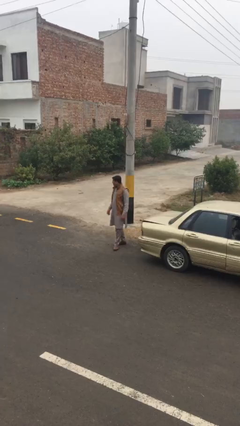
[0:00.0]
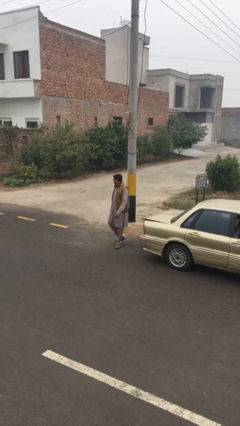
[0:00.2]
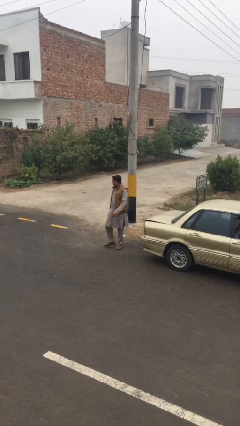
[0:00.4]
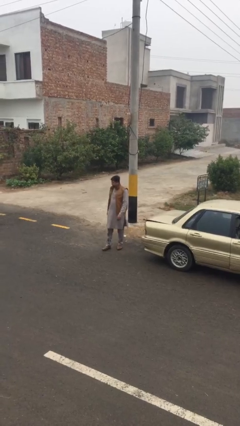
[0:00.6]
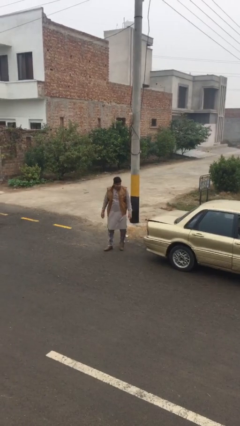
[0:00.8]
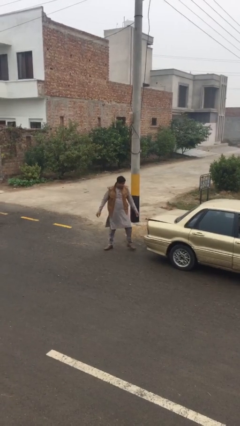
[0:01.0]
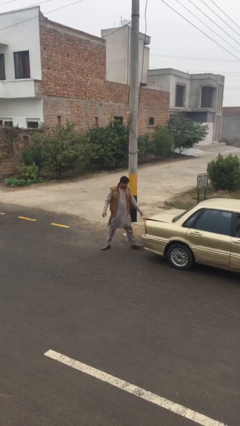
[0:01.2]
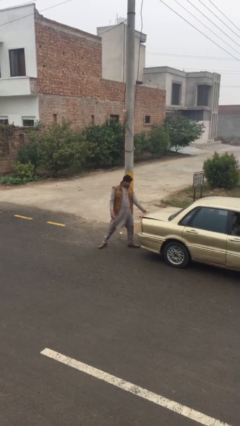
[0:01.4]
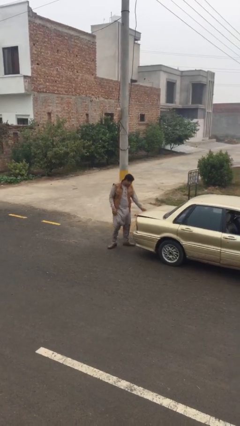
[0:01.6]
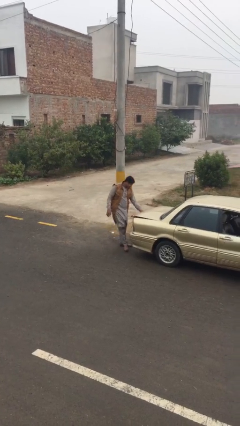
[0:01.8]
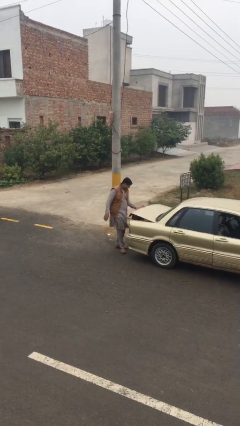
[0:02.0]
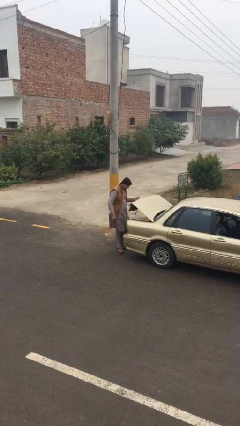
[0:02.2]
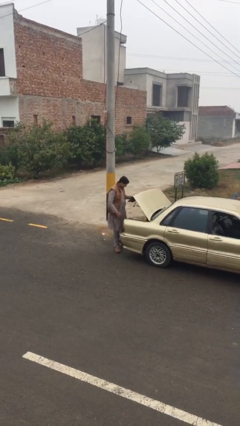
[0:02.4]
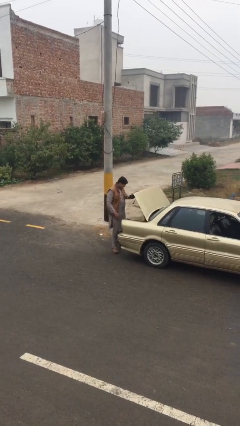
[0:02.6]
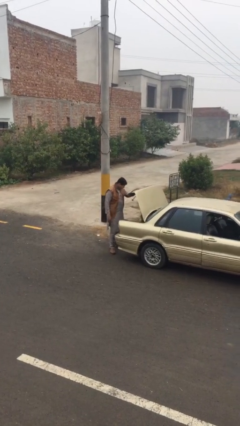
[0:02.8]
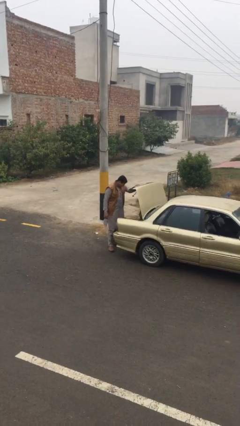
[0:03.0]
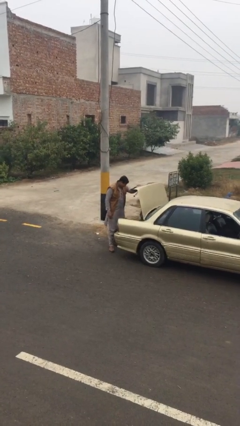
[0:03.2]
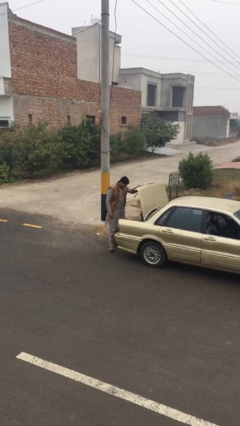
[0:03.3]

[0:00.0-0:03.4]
person opens car trunk

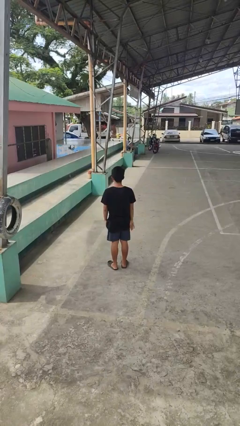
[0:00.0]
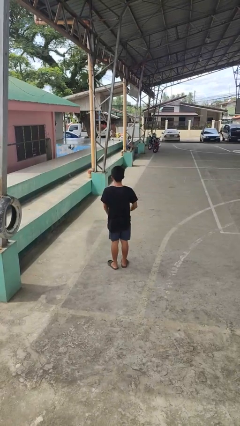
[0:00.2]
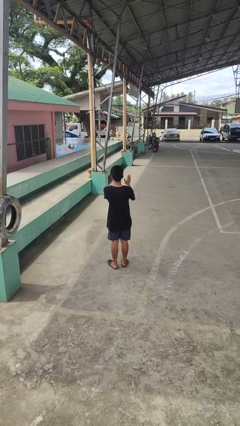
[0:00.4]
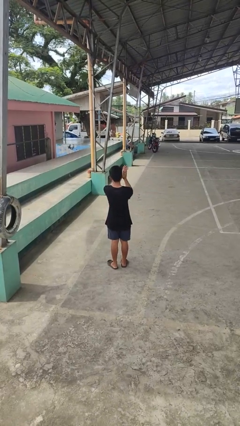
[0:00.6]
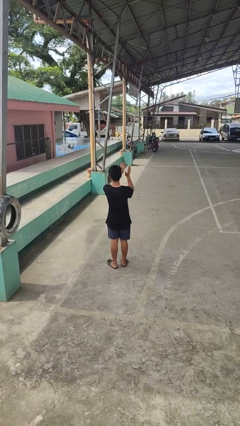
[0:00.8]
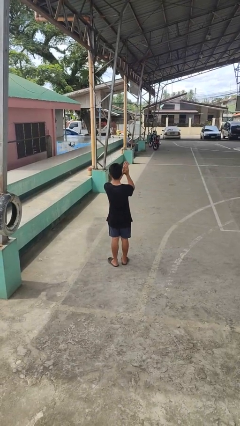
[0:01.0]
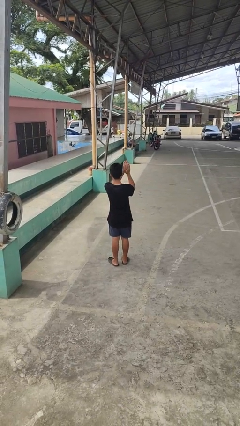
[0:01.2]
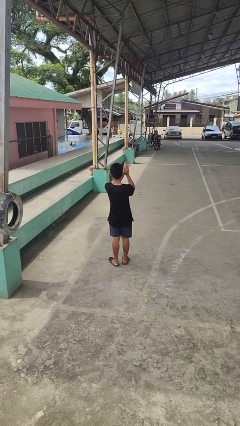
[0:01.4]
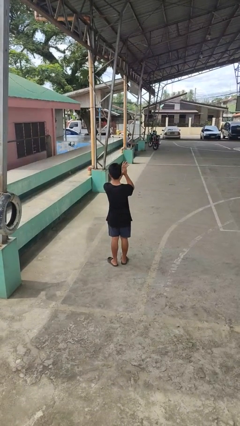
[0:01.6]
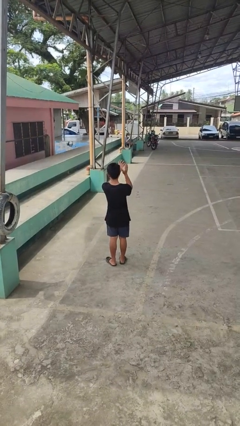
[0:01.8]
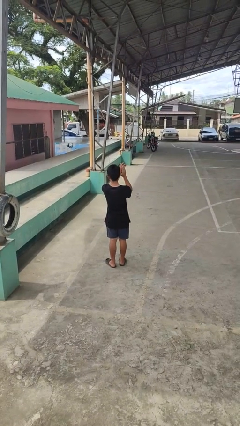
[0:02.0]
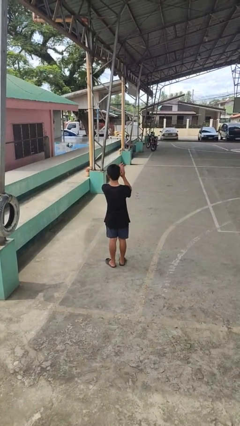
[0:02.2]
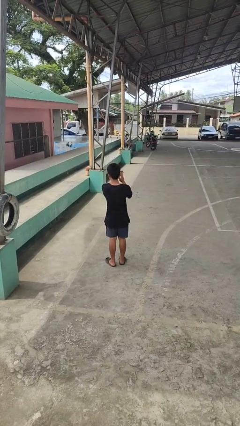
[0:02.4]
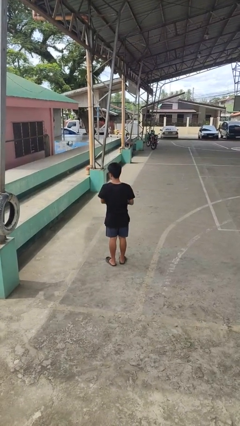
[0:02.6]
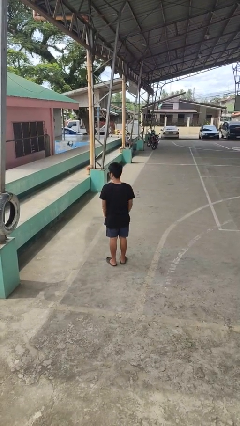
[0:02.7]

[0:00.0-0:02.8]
person claps hands

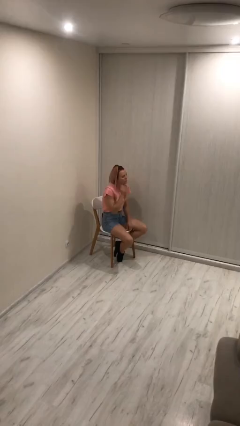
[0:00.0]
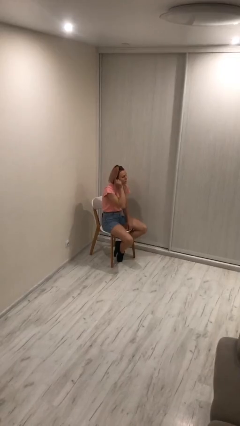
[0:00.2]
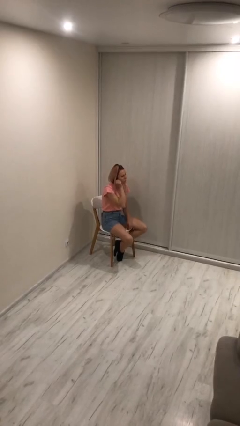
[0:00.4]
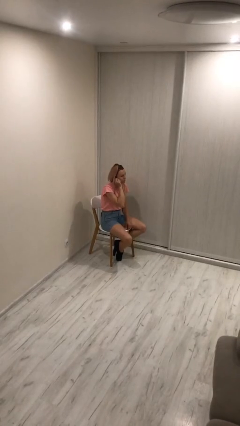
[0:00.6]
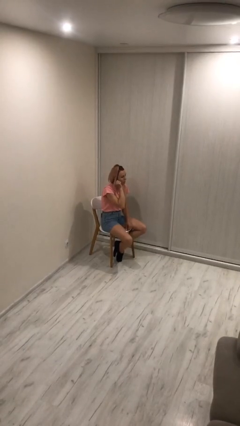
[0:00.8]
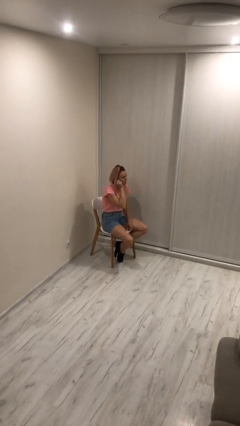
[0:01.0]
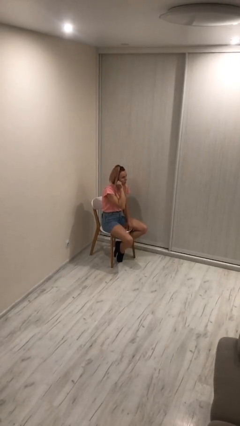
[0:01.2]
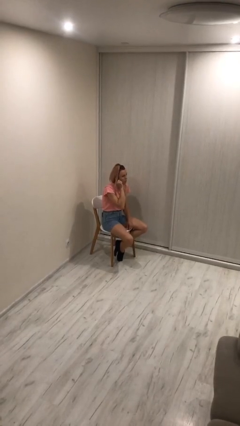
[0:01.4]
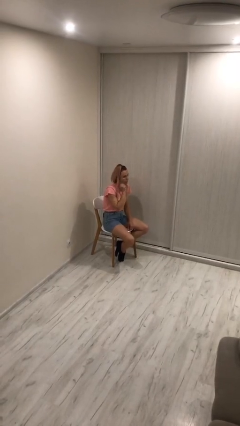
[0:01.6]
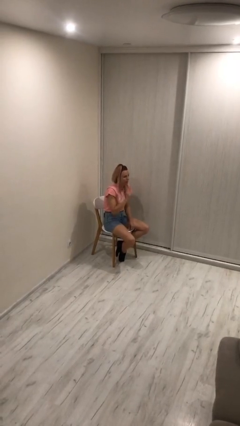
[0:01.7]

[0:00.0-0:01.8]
person touches earlobe

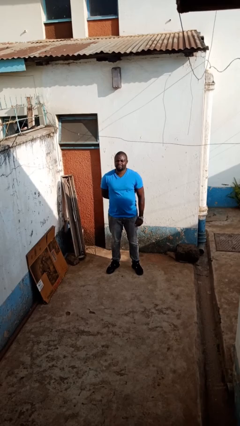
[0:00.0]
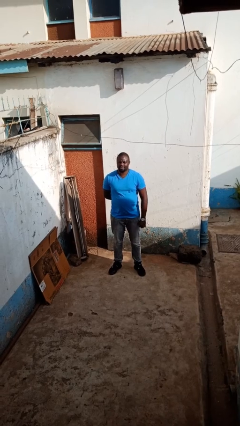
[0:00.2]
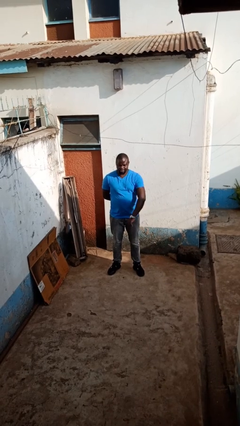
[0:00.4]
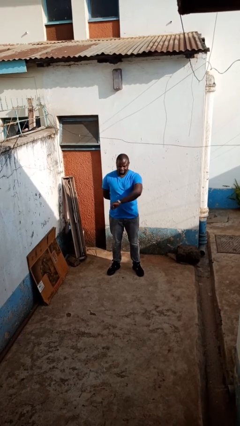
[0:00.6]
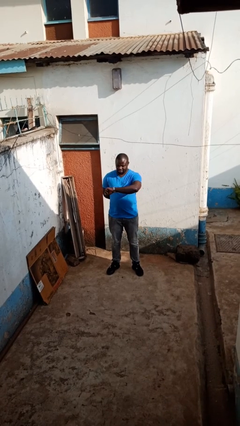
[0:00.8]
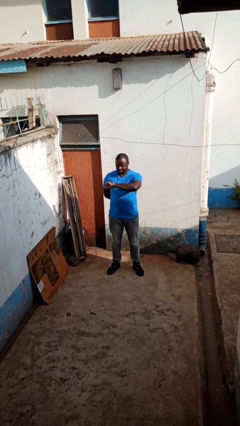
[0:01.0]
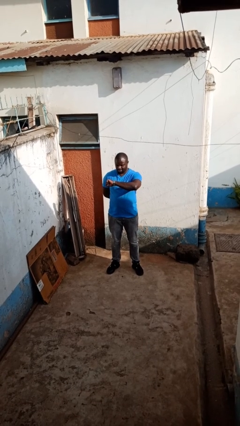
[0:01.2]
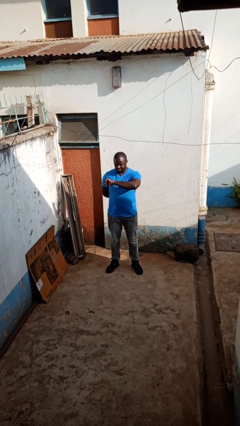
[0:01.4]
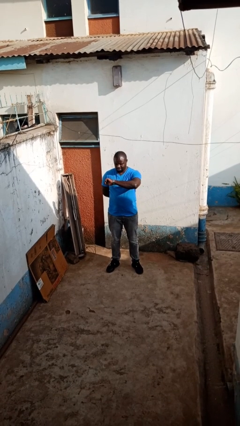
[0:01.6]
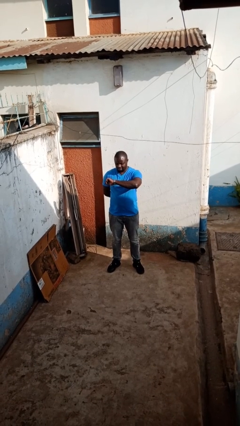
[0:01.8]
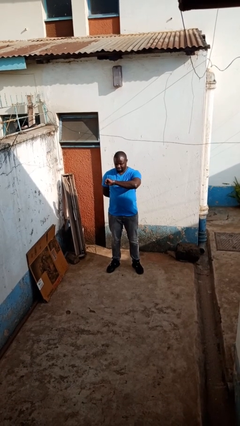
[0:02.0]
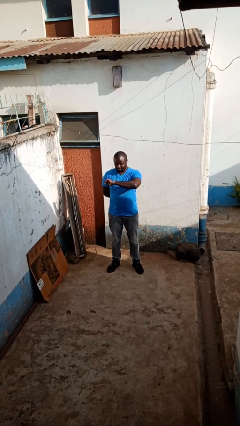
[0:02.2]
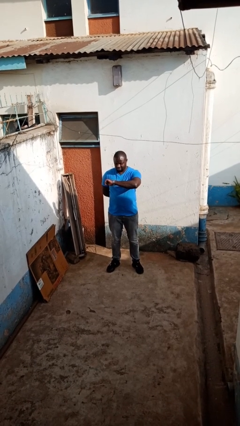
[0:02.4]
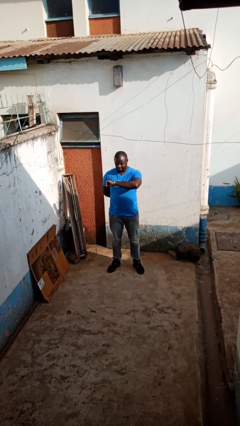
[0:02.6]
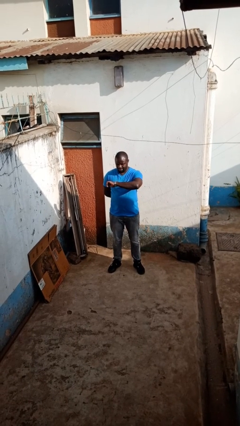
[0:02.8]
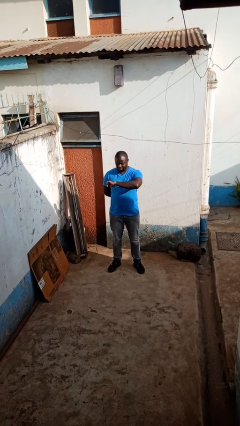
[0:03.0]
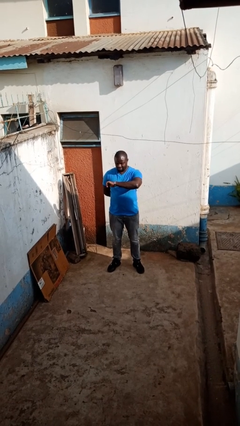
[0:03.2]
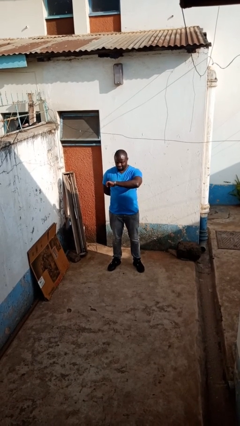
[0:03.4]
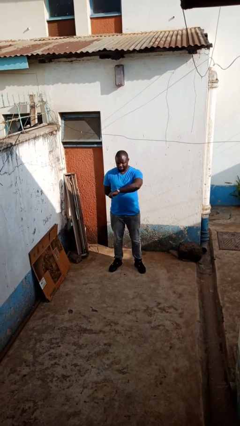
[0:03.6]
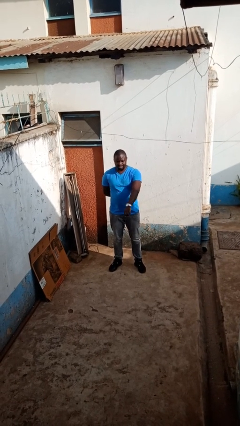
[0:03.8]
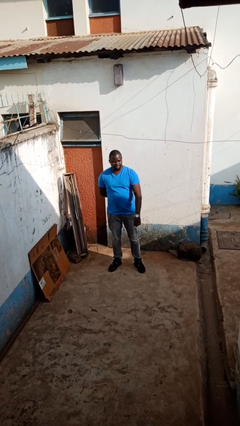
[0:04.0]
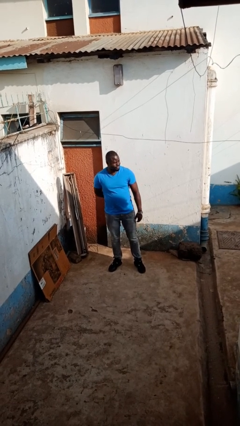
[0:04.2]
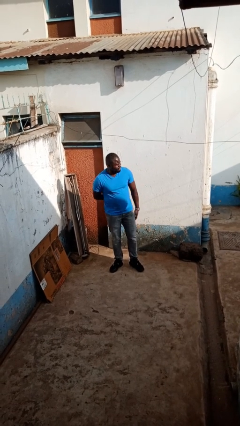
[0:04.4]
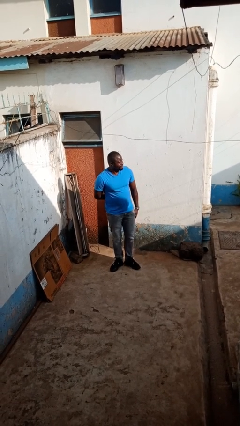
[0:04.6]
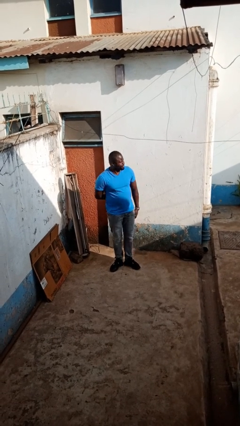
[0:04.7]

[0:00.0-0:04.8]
person looks at wristwatch

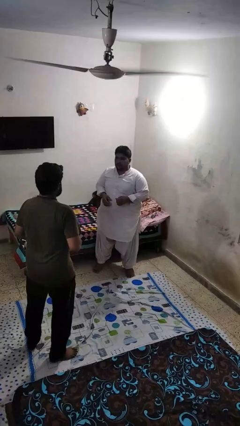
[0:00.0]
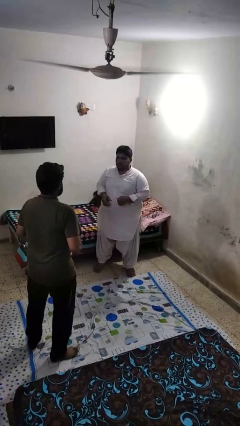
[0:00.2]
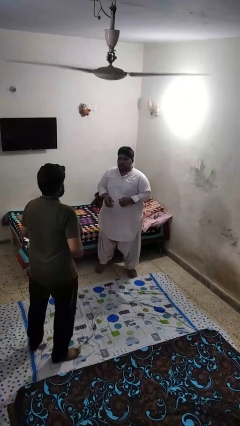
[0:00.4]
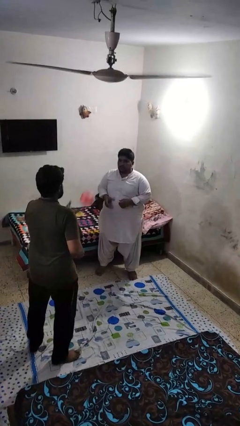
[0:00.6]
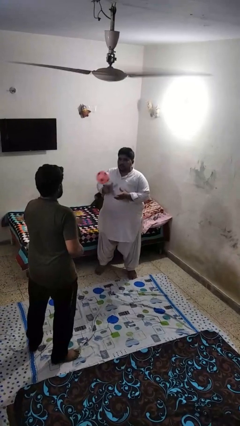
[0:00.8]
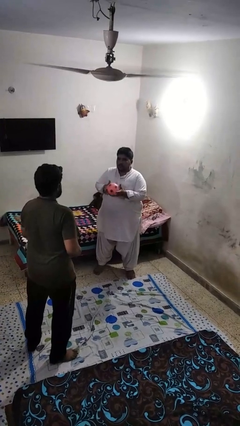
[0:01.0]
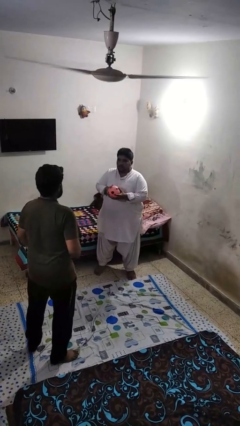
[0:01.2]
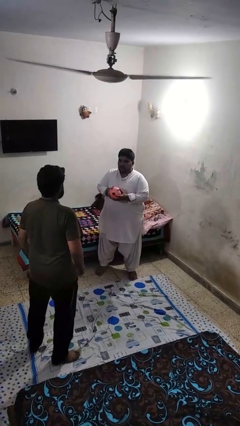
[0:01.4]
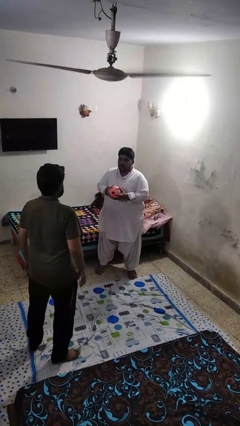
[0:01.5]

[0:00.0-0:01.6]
person catches object from person

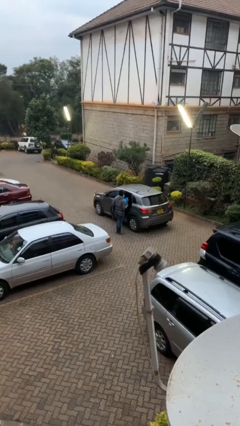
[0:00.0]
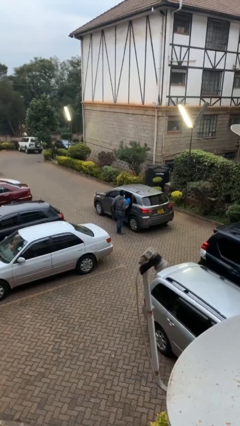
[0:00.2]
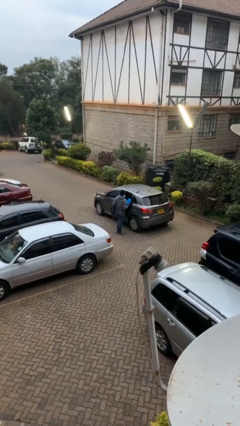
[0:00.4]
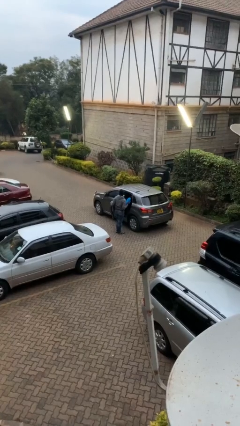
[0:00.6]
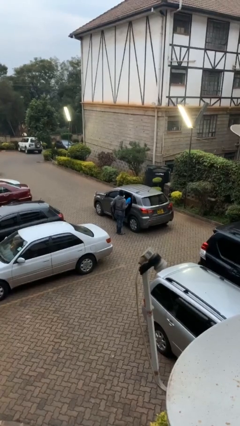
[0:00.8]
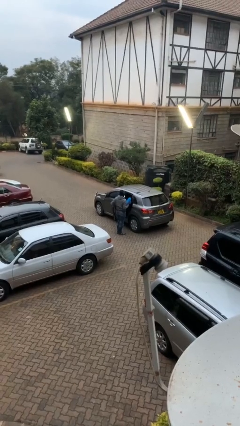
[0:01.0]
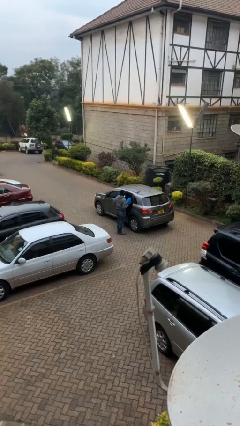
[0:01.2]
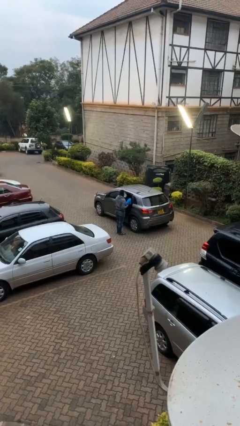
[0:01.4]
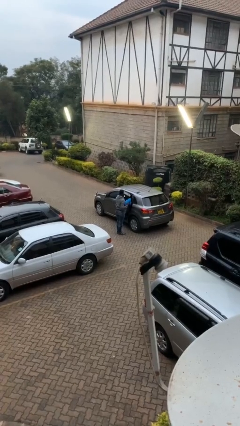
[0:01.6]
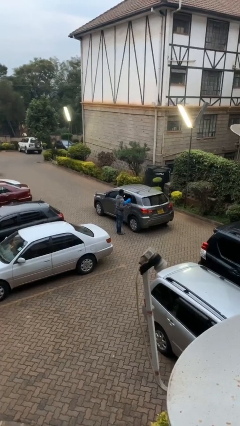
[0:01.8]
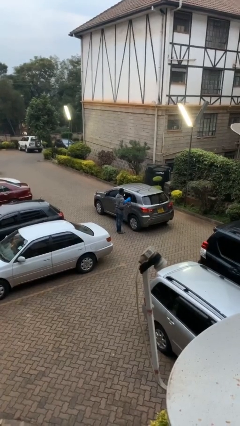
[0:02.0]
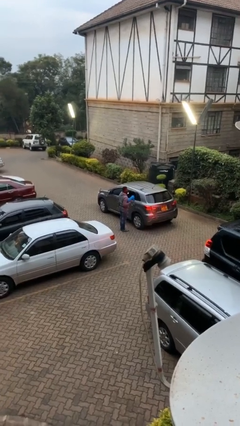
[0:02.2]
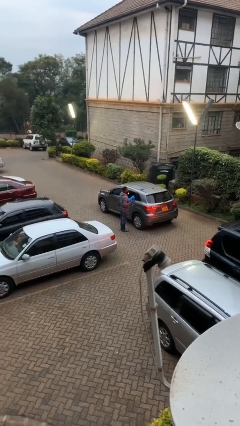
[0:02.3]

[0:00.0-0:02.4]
person closes car door

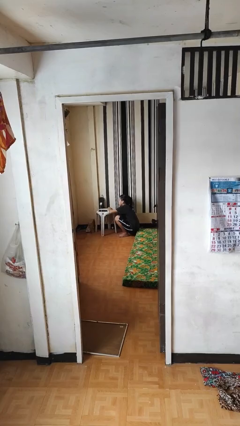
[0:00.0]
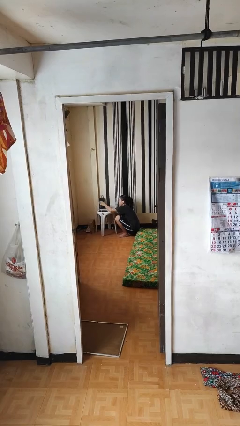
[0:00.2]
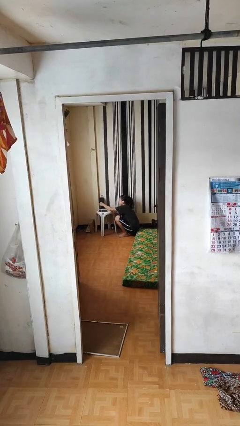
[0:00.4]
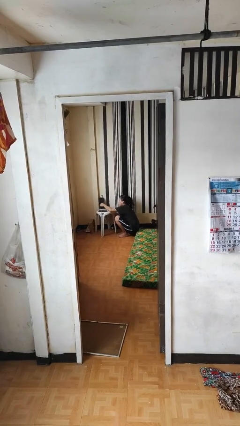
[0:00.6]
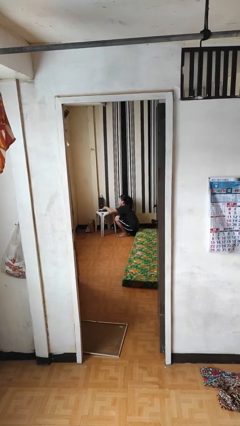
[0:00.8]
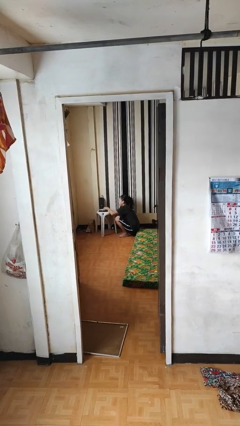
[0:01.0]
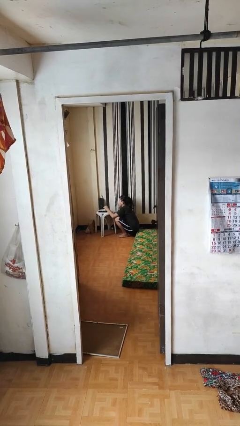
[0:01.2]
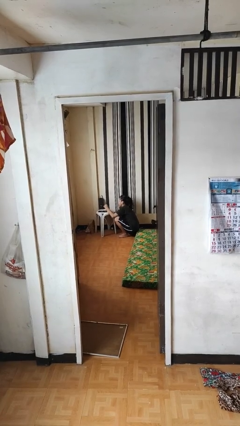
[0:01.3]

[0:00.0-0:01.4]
person unplugs from electrical socket
